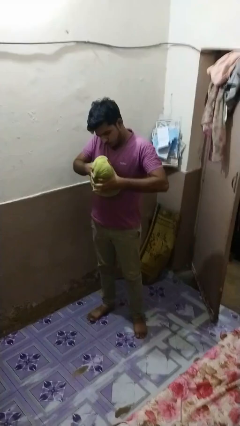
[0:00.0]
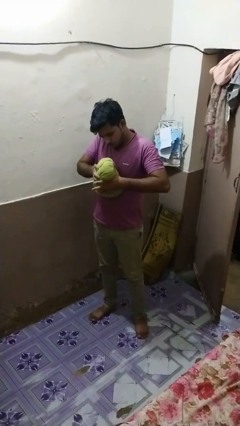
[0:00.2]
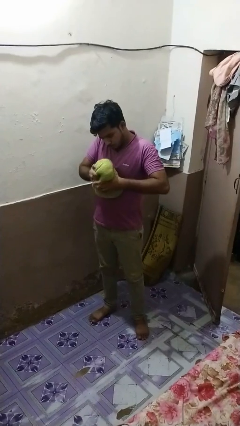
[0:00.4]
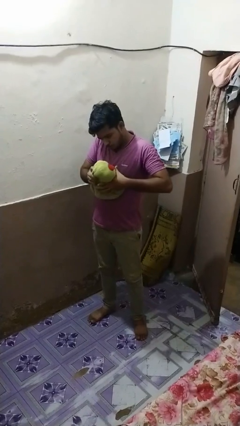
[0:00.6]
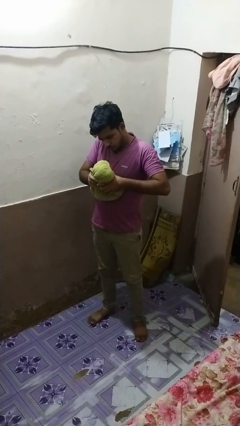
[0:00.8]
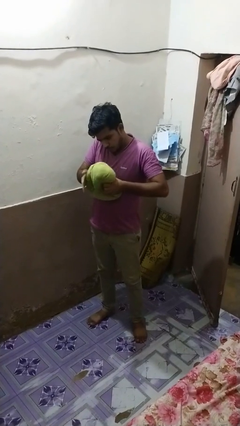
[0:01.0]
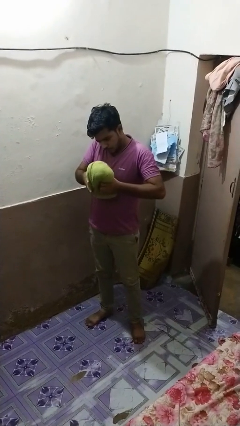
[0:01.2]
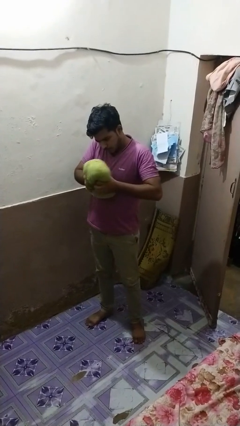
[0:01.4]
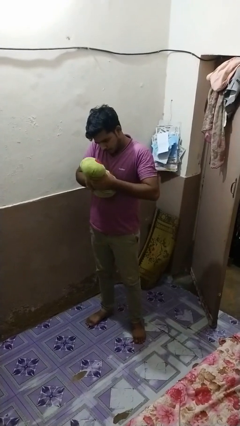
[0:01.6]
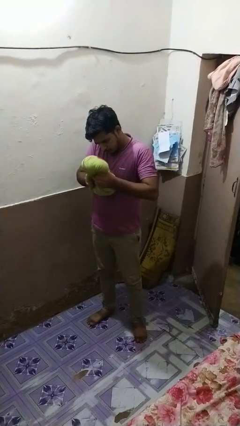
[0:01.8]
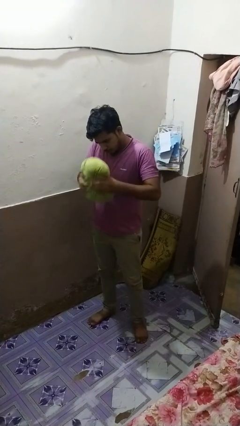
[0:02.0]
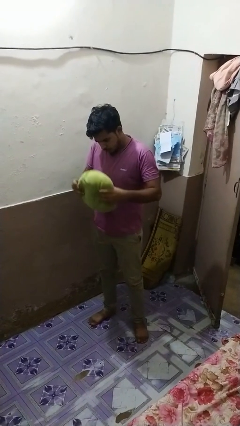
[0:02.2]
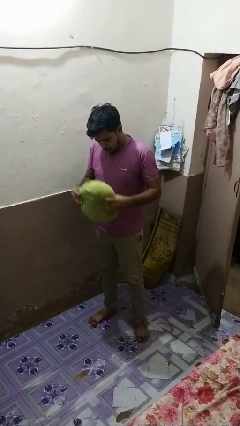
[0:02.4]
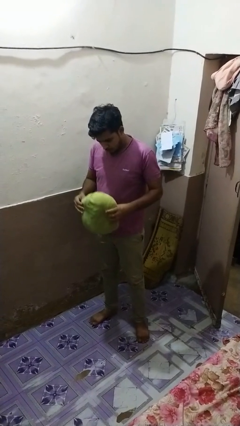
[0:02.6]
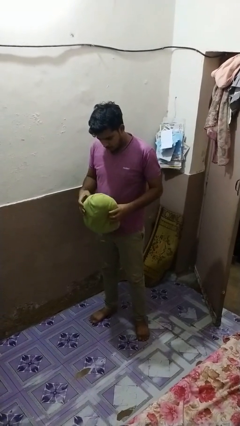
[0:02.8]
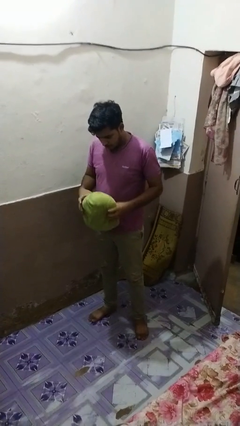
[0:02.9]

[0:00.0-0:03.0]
person squeezes object

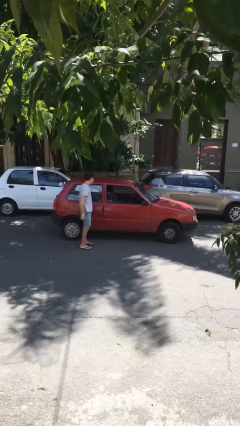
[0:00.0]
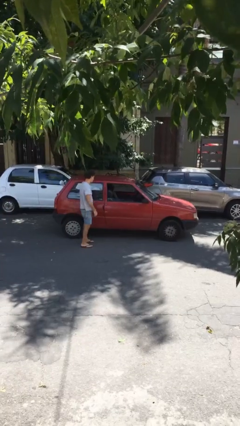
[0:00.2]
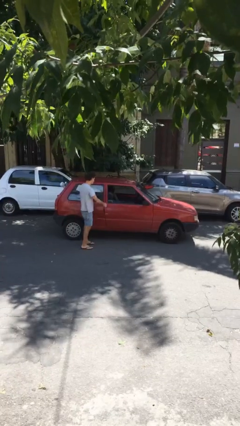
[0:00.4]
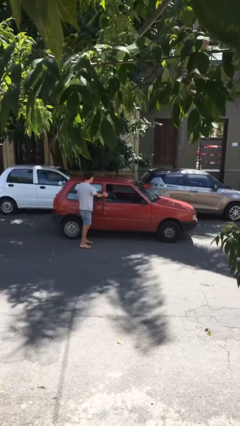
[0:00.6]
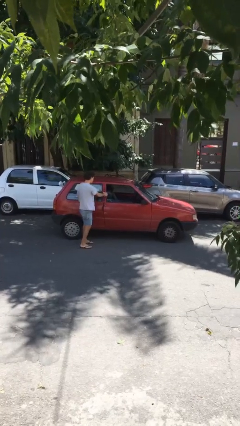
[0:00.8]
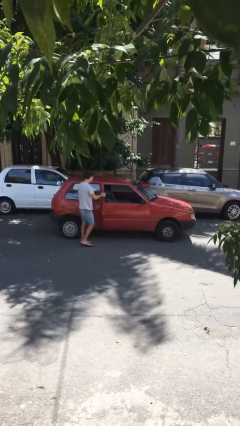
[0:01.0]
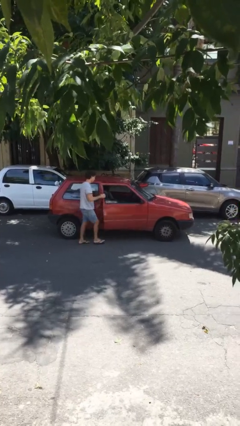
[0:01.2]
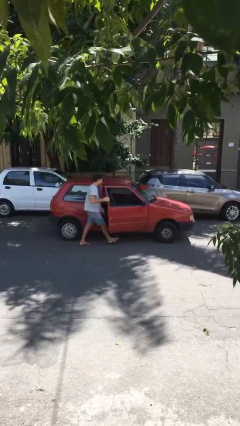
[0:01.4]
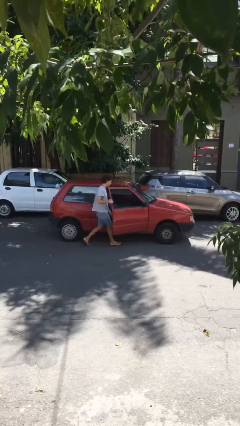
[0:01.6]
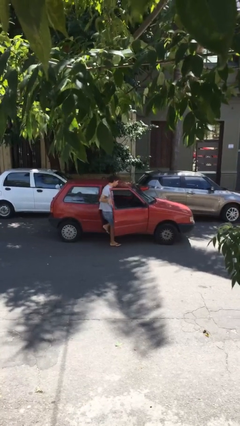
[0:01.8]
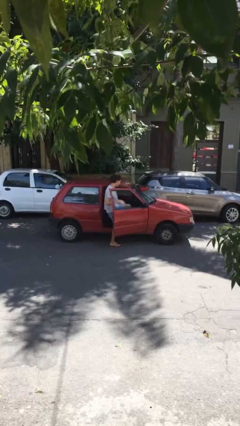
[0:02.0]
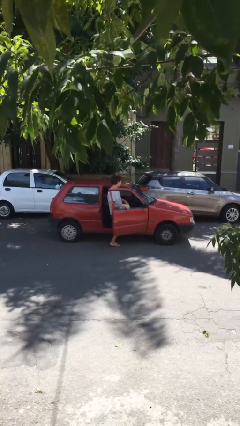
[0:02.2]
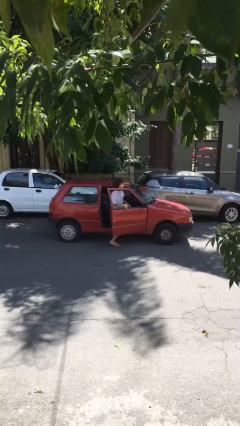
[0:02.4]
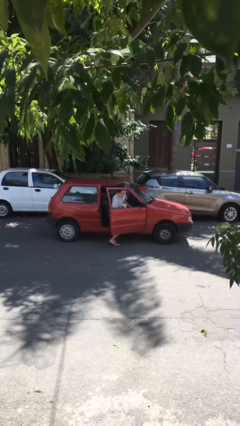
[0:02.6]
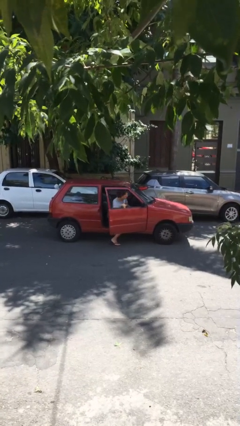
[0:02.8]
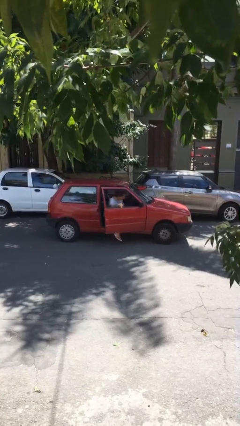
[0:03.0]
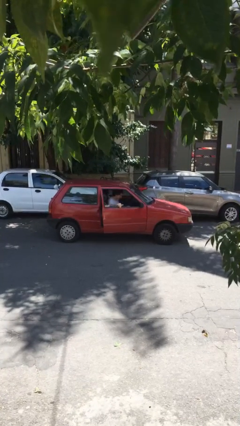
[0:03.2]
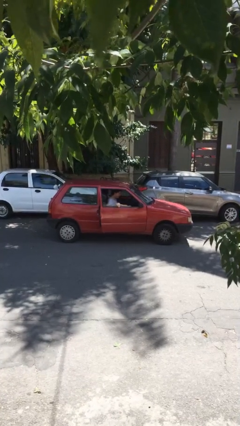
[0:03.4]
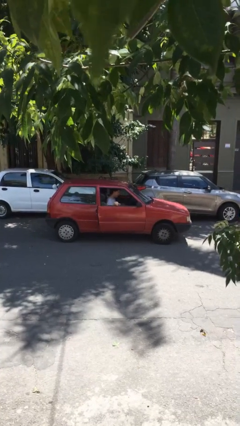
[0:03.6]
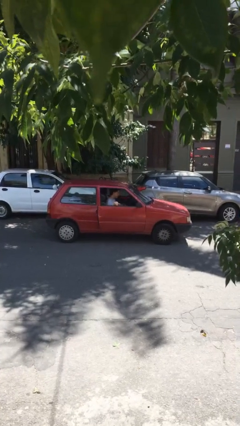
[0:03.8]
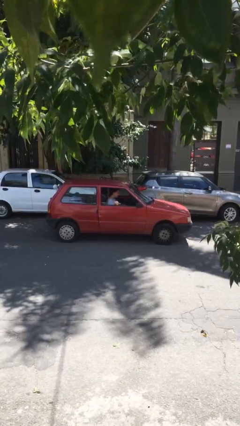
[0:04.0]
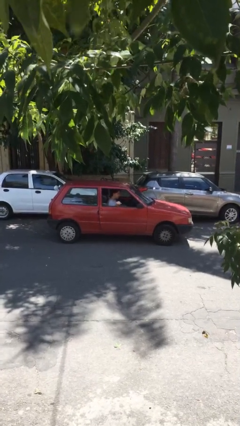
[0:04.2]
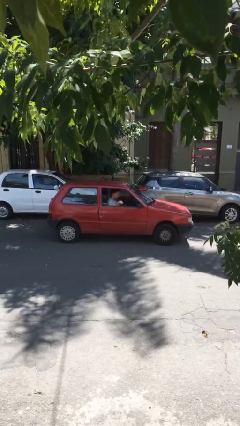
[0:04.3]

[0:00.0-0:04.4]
car picks up person

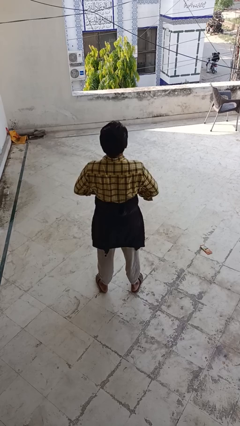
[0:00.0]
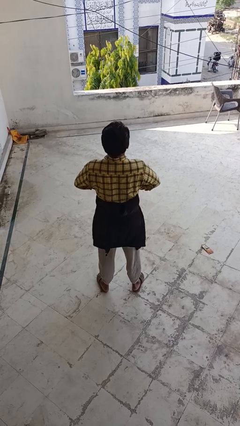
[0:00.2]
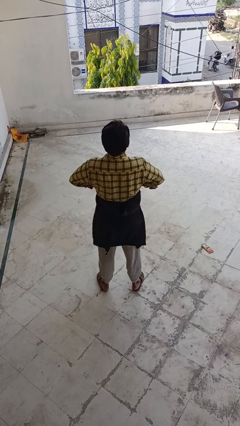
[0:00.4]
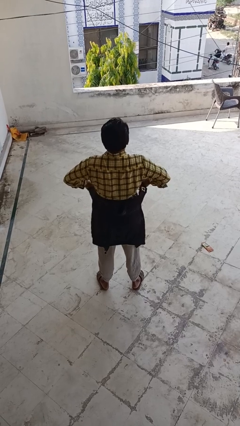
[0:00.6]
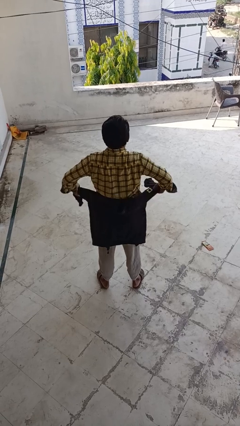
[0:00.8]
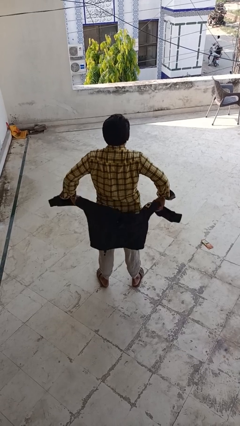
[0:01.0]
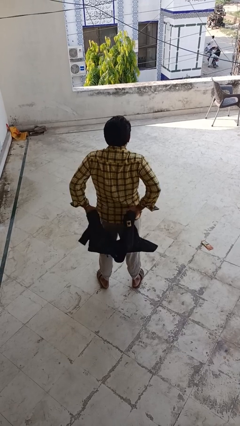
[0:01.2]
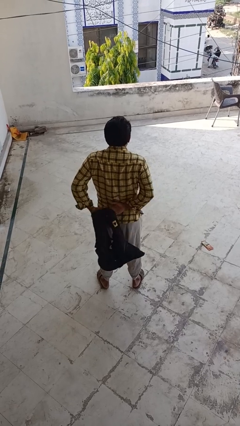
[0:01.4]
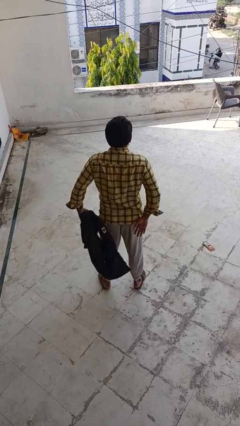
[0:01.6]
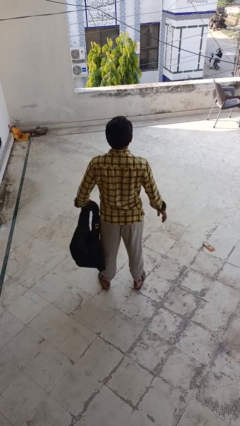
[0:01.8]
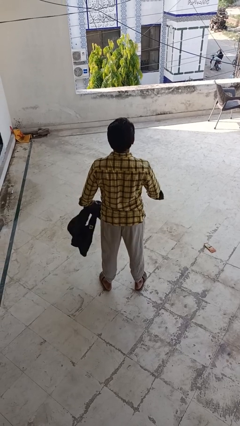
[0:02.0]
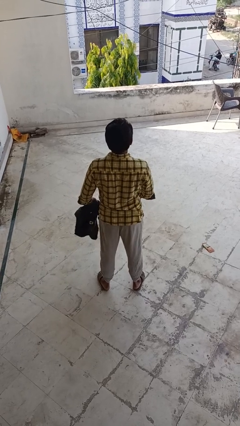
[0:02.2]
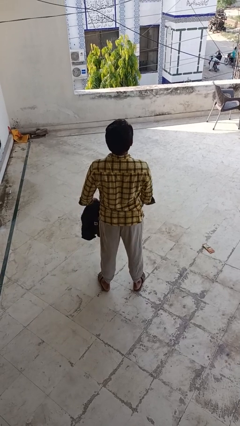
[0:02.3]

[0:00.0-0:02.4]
person unties jacket around waist

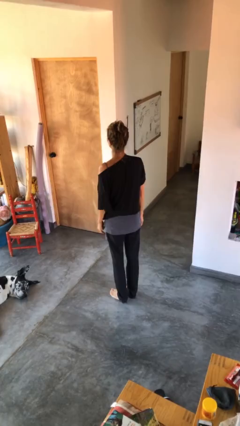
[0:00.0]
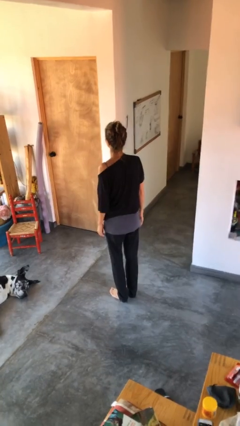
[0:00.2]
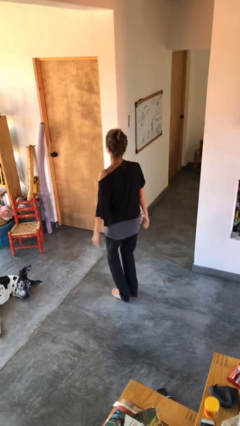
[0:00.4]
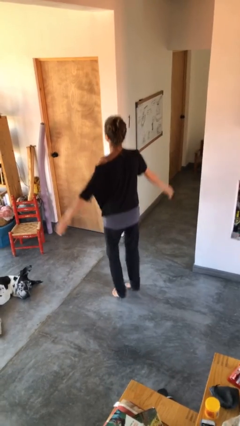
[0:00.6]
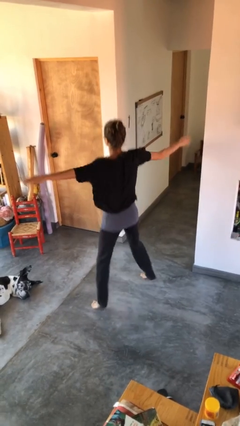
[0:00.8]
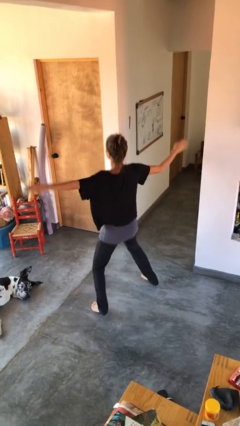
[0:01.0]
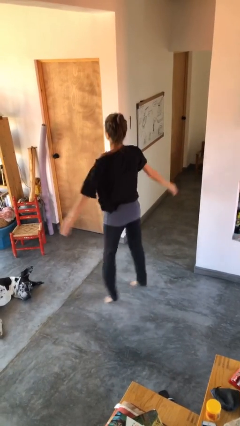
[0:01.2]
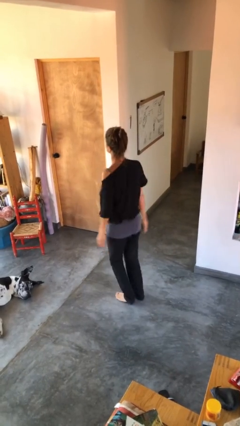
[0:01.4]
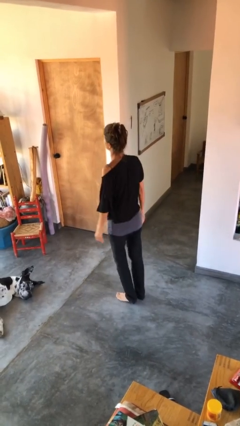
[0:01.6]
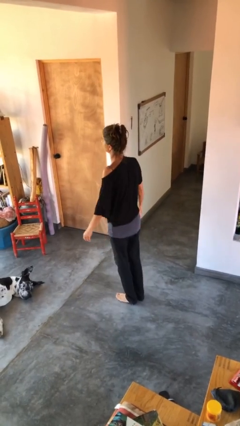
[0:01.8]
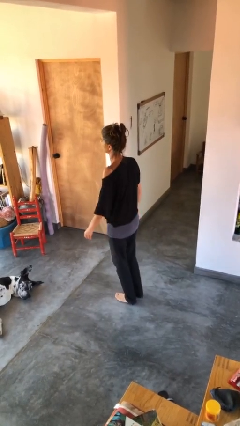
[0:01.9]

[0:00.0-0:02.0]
person exercises with jumping jacks

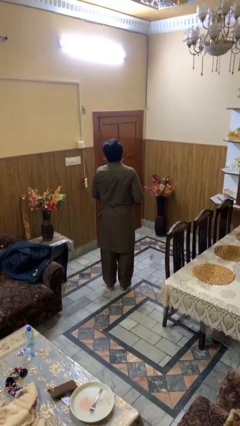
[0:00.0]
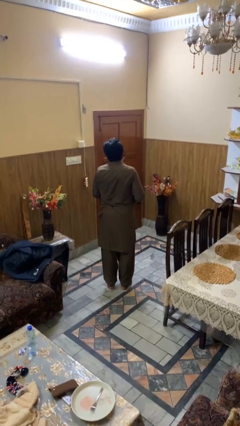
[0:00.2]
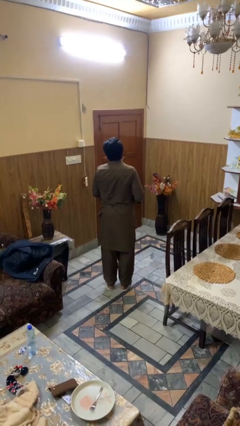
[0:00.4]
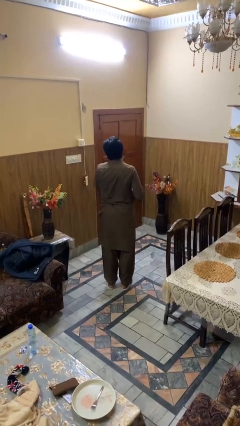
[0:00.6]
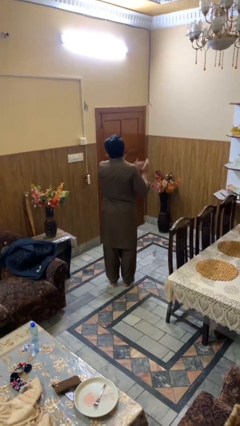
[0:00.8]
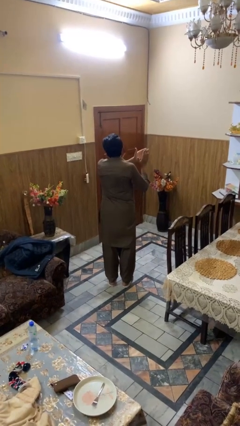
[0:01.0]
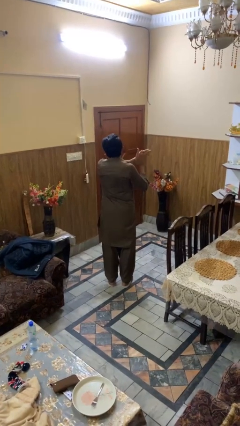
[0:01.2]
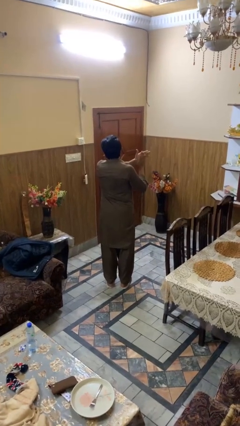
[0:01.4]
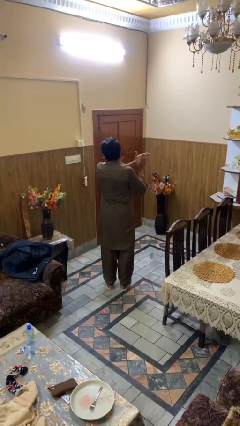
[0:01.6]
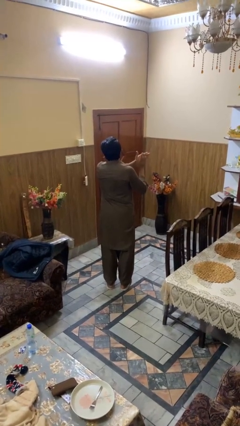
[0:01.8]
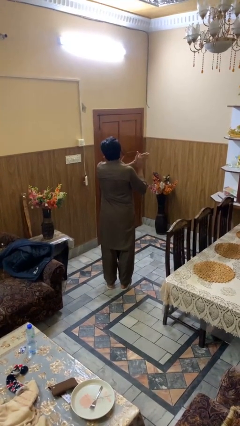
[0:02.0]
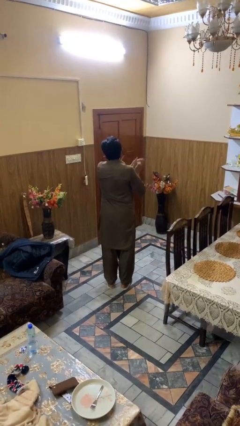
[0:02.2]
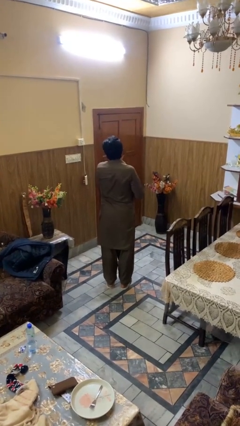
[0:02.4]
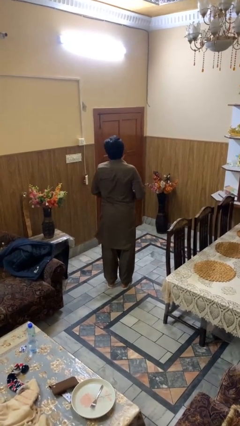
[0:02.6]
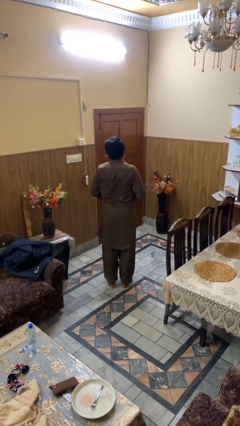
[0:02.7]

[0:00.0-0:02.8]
person claps hands

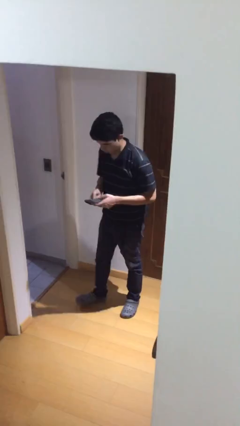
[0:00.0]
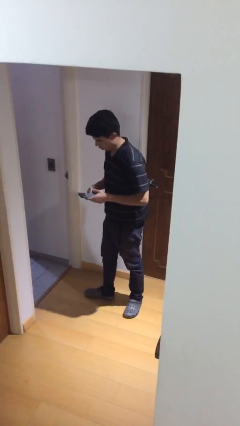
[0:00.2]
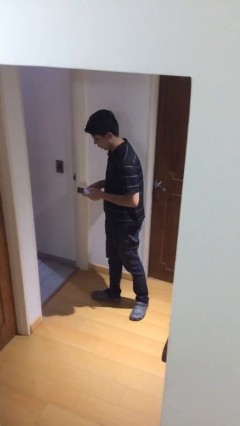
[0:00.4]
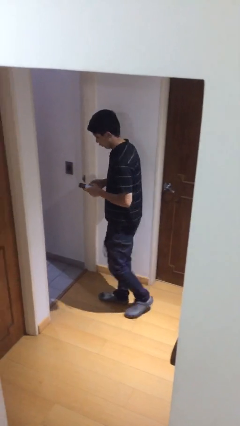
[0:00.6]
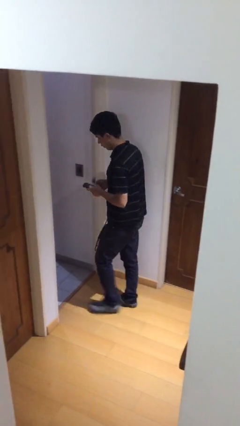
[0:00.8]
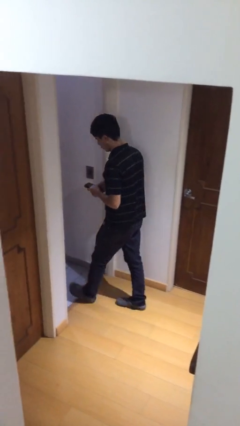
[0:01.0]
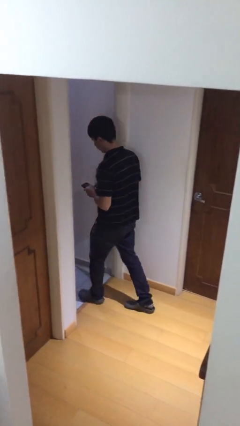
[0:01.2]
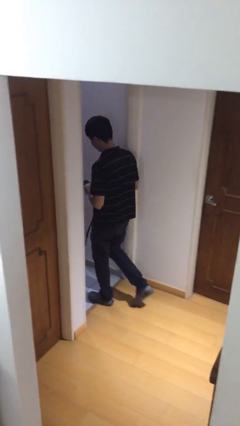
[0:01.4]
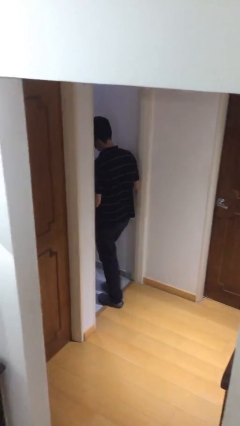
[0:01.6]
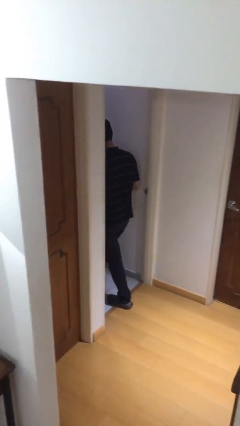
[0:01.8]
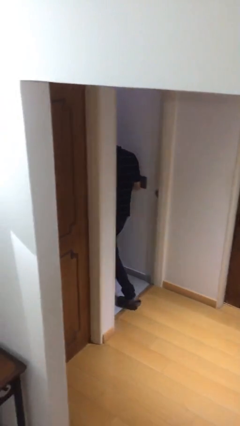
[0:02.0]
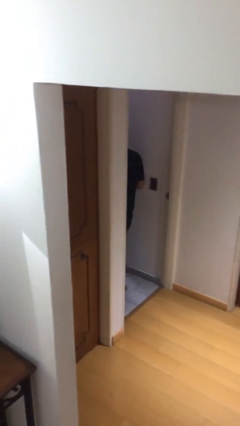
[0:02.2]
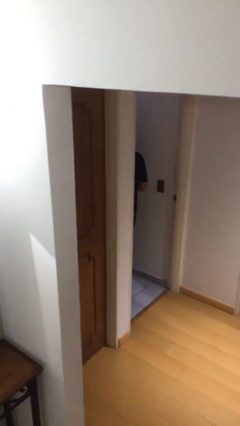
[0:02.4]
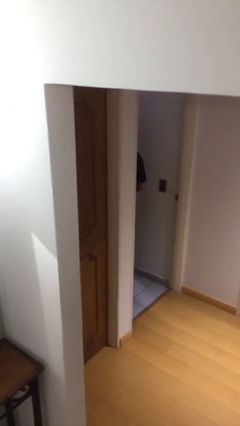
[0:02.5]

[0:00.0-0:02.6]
person exits scene through structure

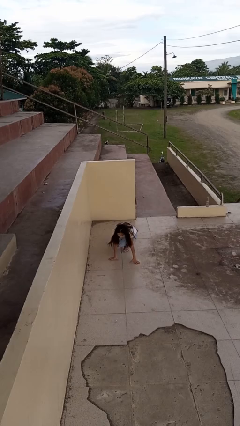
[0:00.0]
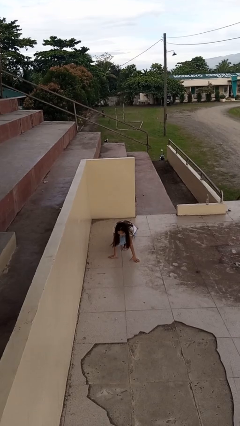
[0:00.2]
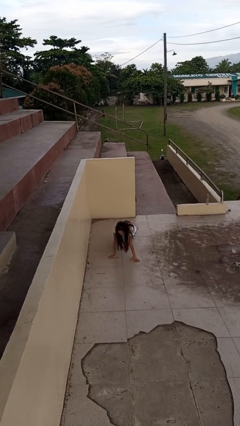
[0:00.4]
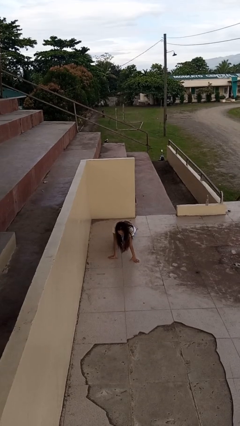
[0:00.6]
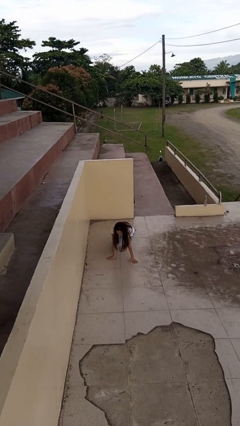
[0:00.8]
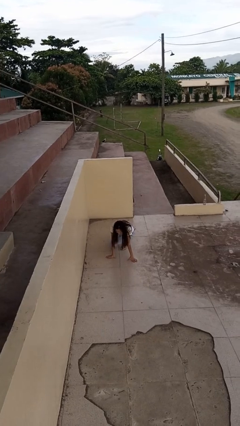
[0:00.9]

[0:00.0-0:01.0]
person lies down on floor
